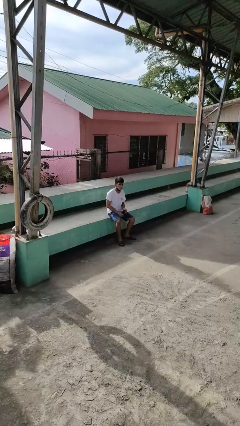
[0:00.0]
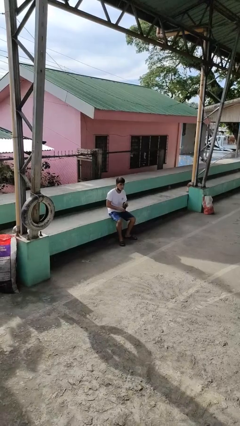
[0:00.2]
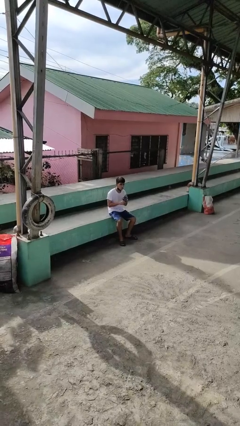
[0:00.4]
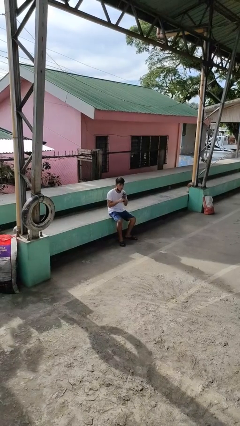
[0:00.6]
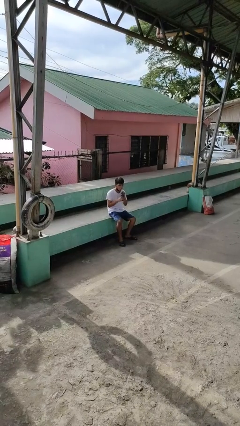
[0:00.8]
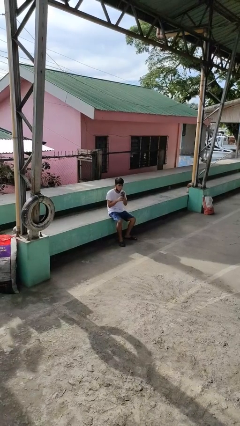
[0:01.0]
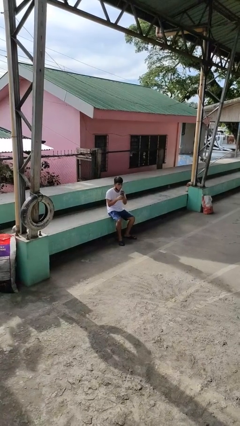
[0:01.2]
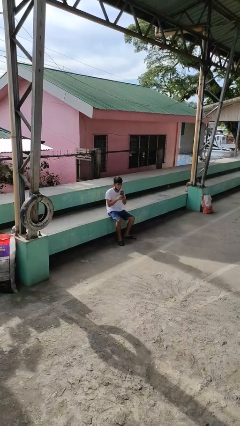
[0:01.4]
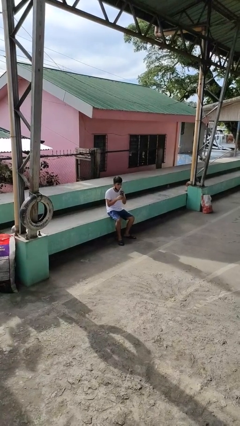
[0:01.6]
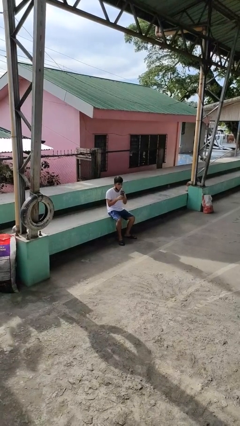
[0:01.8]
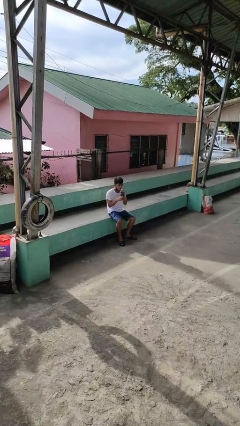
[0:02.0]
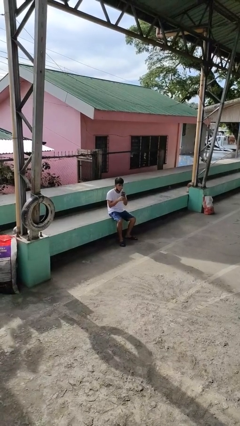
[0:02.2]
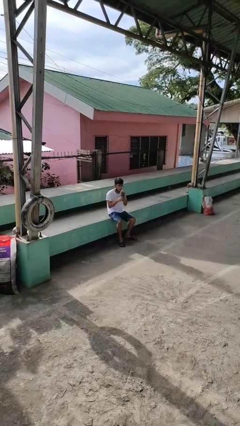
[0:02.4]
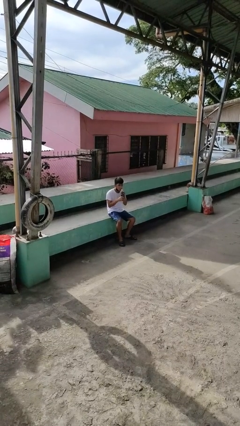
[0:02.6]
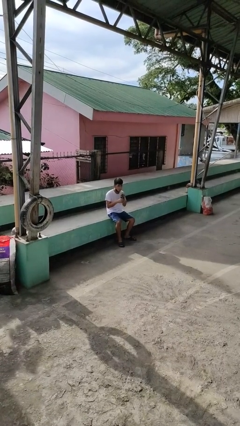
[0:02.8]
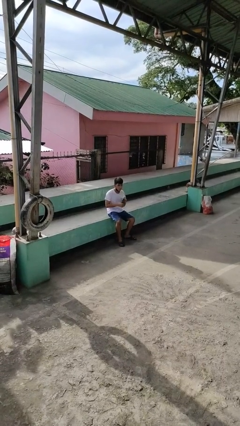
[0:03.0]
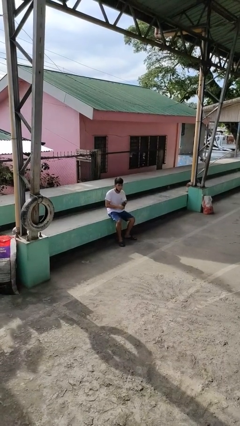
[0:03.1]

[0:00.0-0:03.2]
person drinks from straw

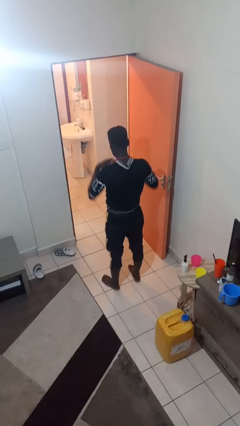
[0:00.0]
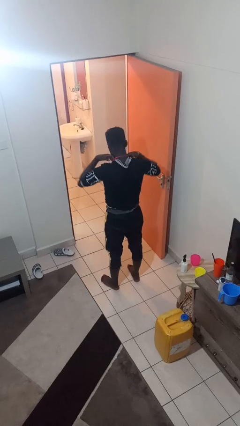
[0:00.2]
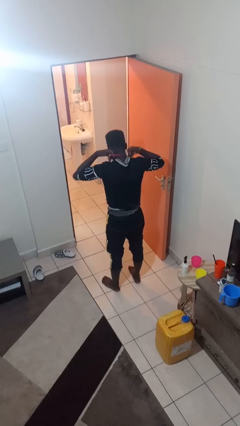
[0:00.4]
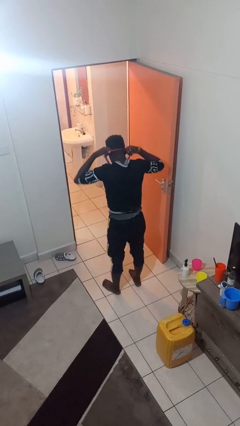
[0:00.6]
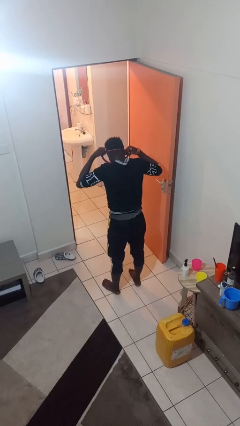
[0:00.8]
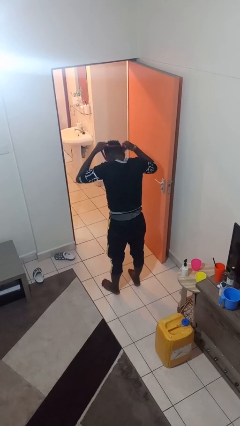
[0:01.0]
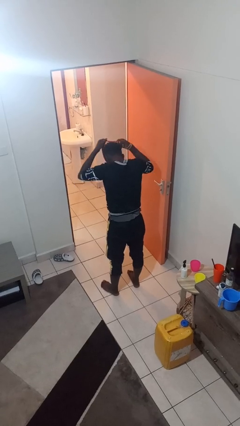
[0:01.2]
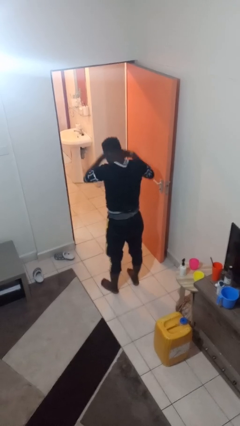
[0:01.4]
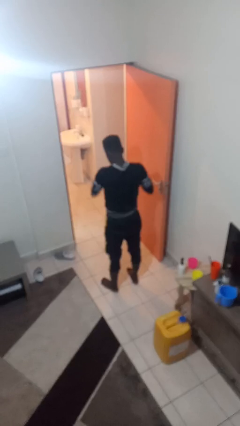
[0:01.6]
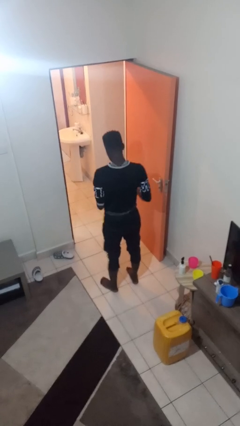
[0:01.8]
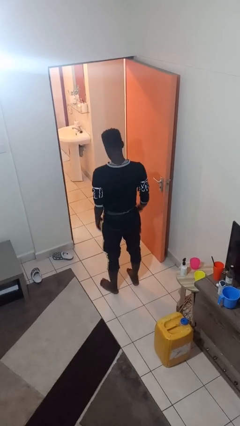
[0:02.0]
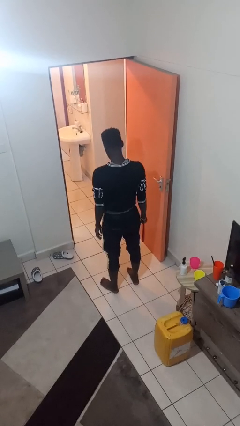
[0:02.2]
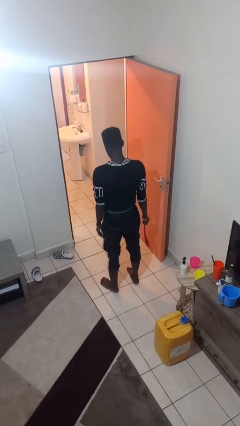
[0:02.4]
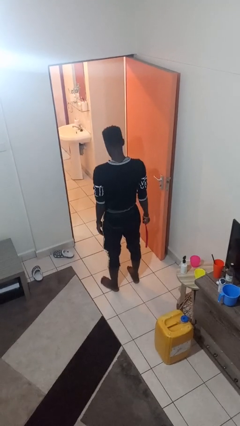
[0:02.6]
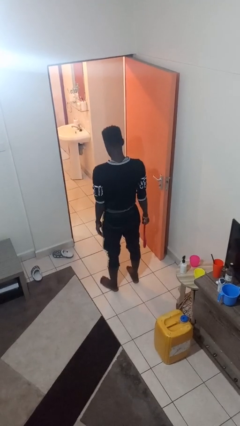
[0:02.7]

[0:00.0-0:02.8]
person takes off necklace

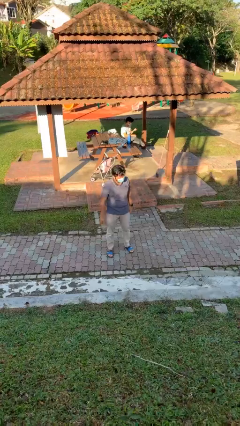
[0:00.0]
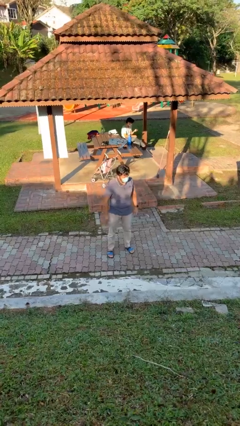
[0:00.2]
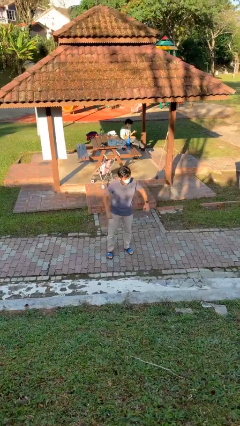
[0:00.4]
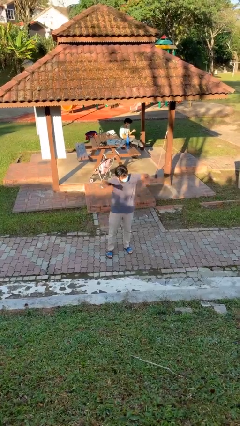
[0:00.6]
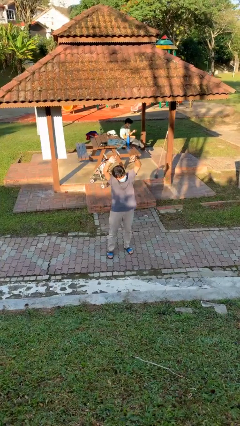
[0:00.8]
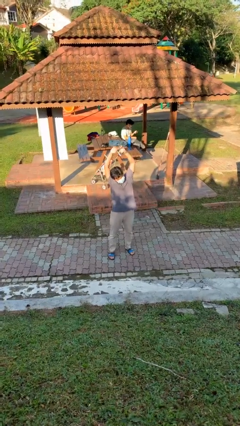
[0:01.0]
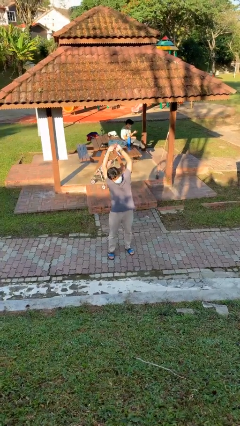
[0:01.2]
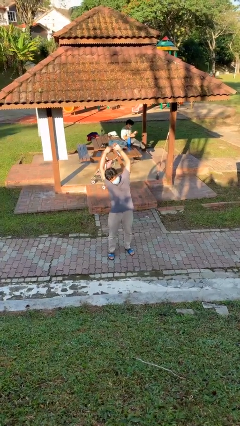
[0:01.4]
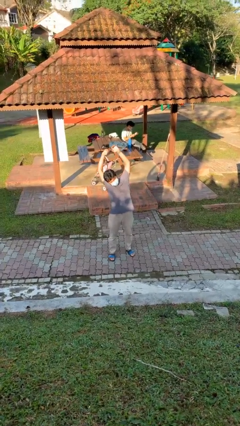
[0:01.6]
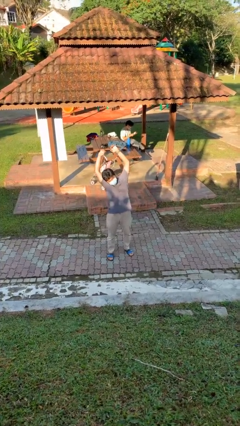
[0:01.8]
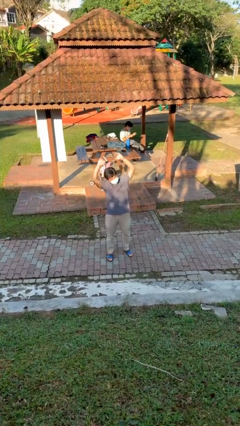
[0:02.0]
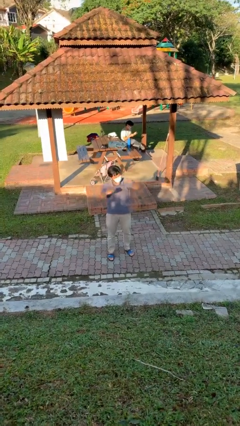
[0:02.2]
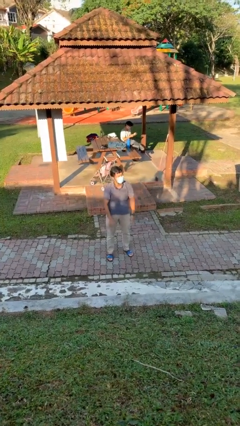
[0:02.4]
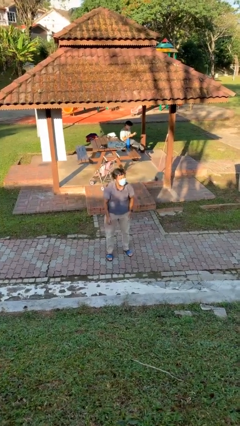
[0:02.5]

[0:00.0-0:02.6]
person stretches arms over head

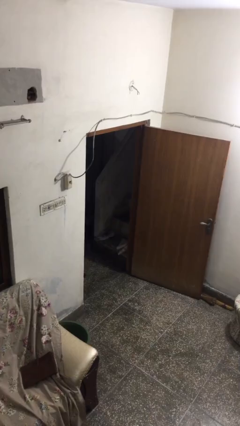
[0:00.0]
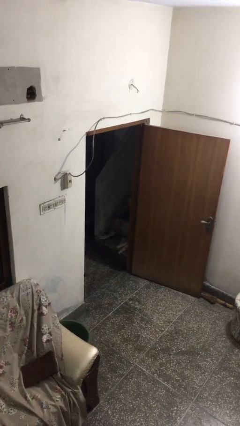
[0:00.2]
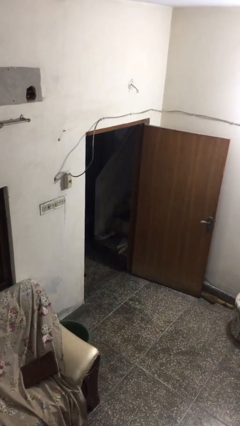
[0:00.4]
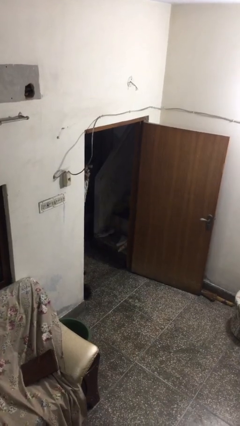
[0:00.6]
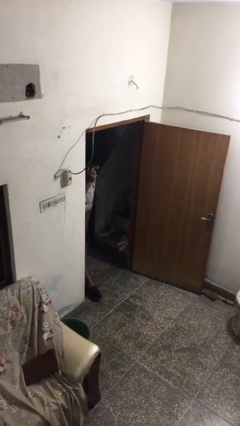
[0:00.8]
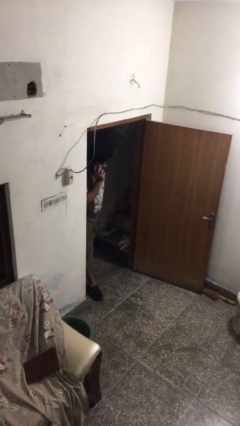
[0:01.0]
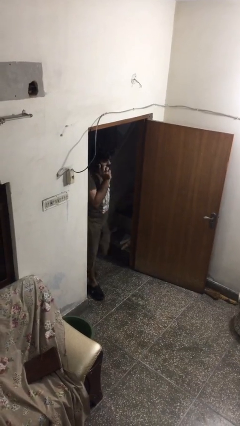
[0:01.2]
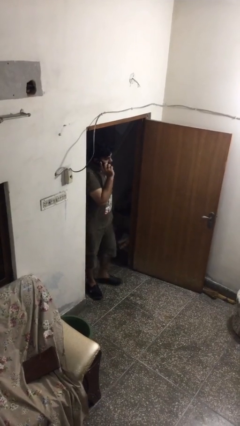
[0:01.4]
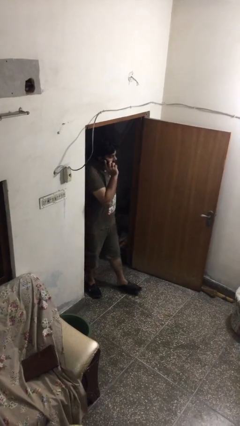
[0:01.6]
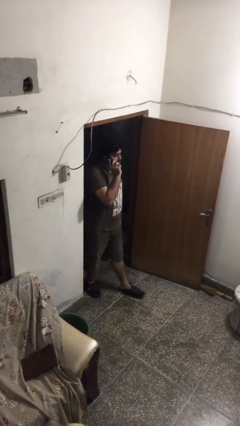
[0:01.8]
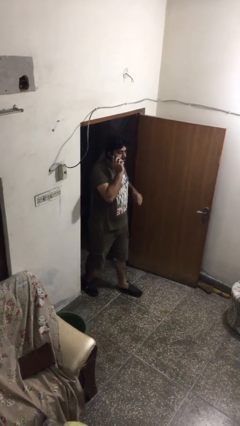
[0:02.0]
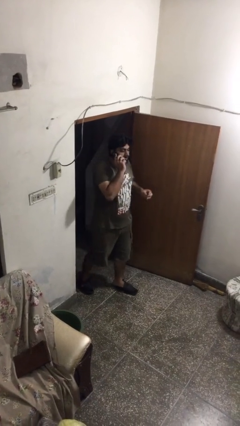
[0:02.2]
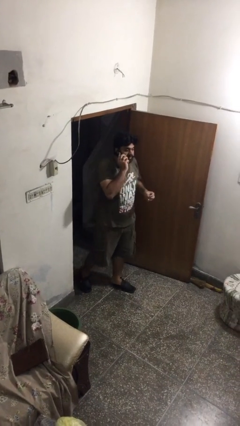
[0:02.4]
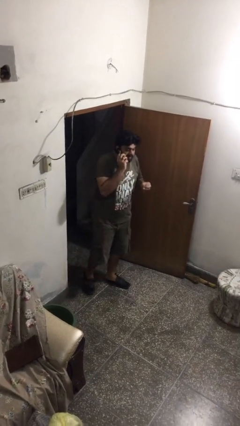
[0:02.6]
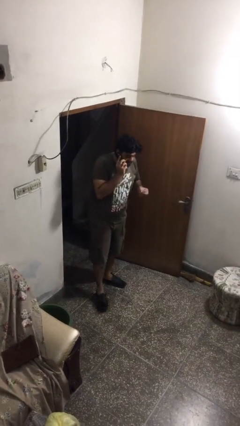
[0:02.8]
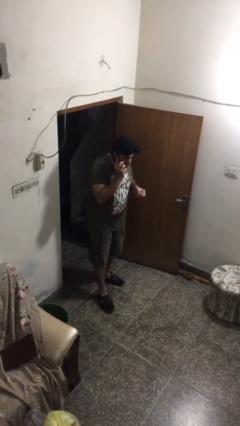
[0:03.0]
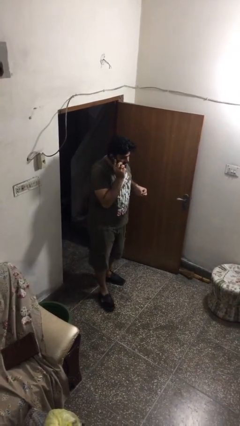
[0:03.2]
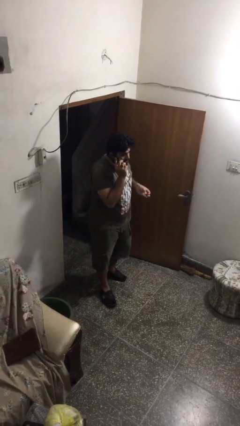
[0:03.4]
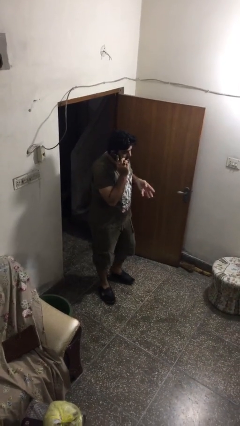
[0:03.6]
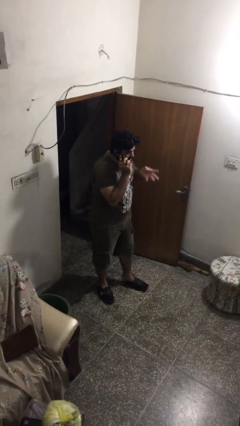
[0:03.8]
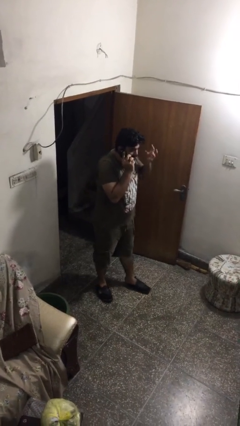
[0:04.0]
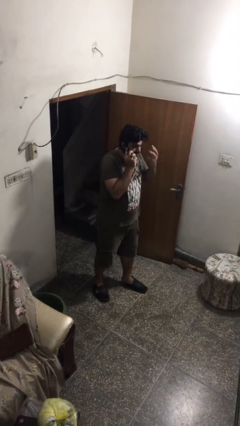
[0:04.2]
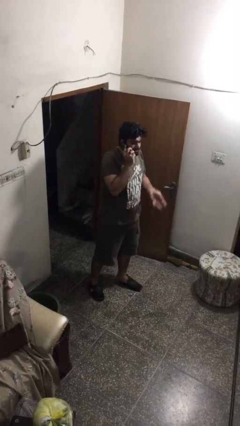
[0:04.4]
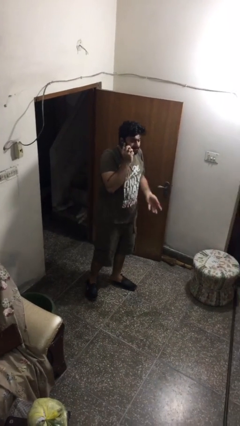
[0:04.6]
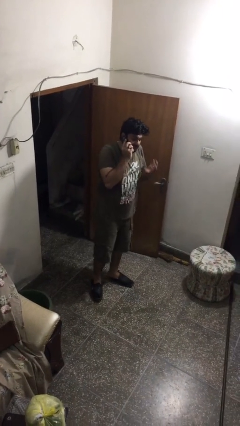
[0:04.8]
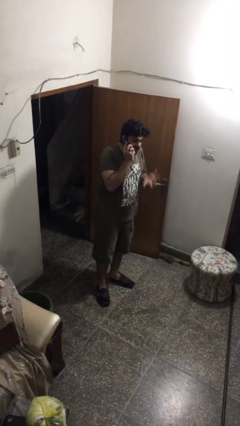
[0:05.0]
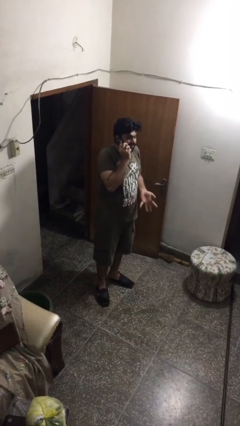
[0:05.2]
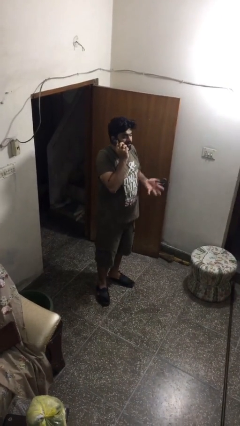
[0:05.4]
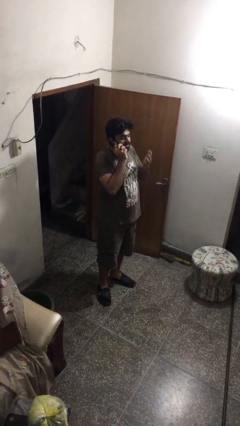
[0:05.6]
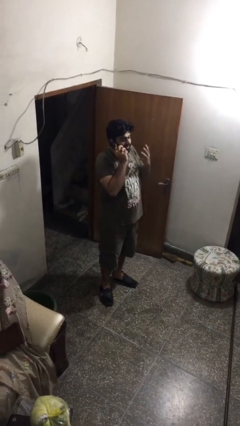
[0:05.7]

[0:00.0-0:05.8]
person enters scene through structure

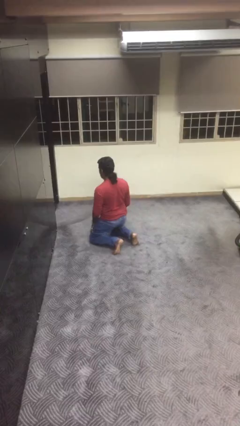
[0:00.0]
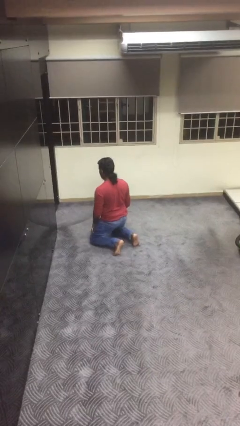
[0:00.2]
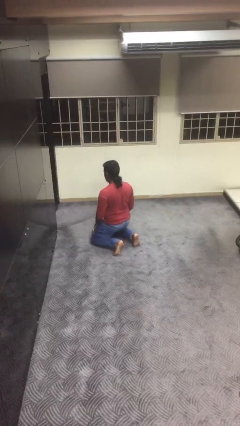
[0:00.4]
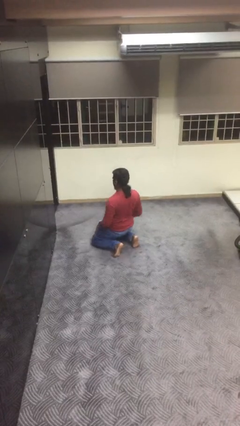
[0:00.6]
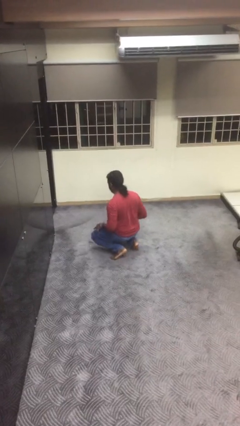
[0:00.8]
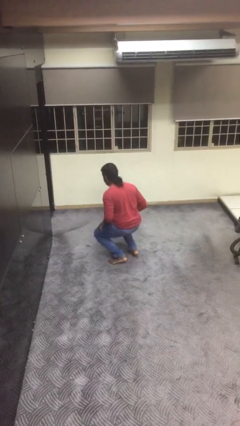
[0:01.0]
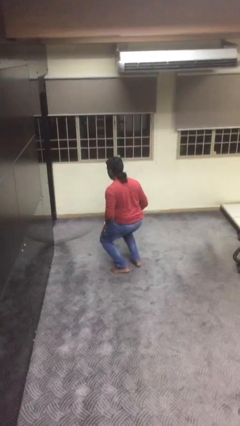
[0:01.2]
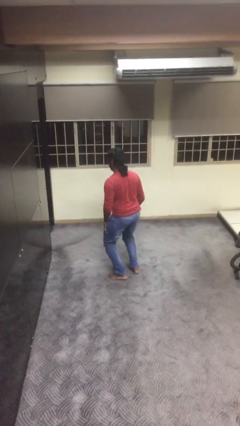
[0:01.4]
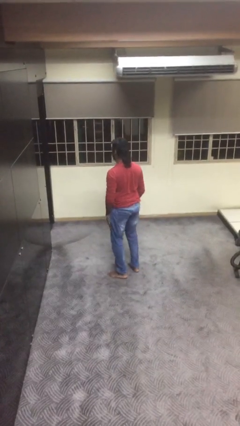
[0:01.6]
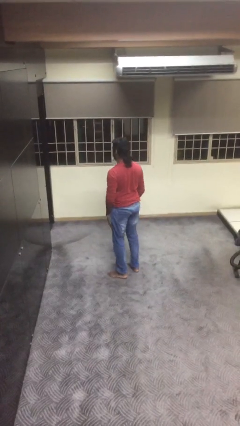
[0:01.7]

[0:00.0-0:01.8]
person stands up from floor

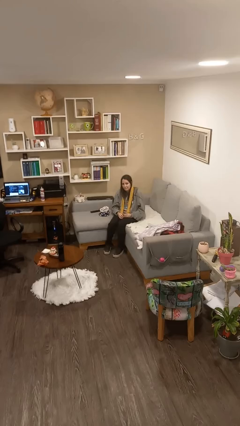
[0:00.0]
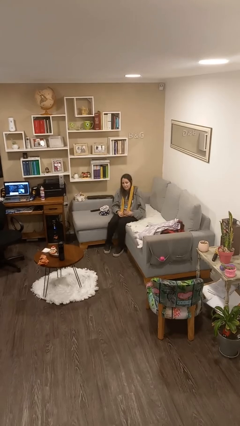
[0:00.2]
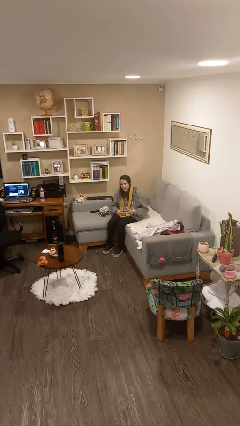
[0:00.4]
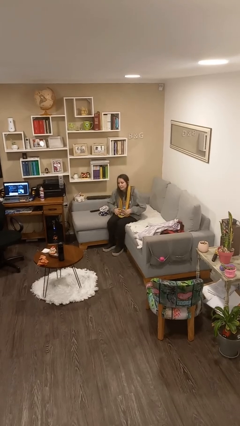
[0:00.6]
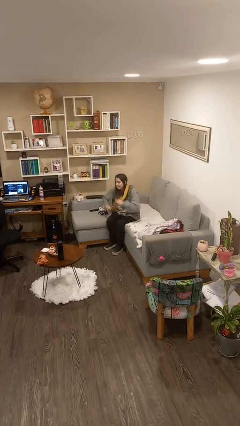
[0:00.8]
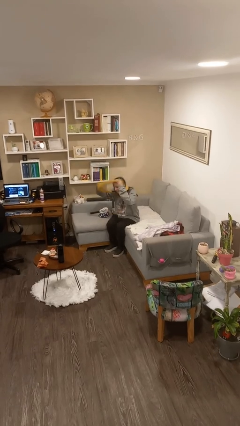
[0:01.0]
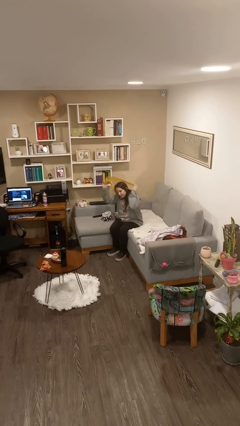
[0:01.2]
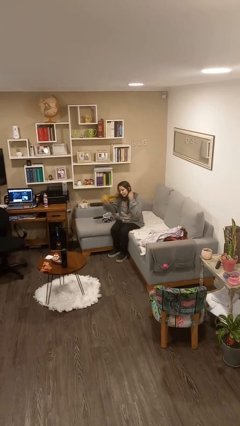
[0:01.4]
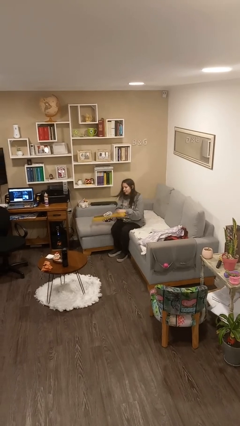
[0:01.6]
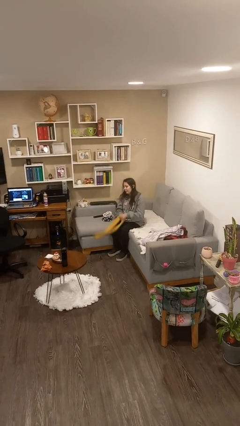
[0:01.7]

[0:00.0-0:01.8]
person takes off scarf
